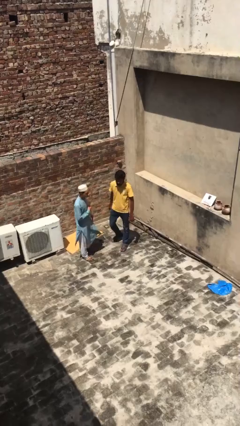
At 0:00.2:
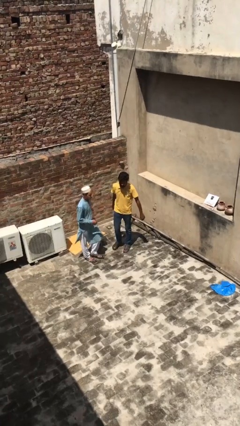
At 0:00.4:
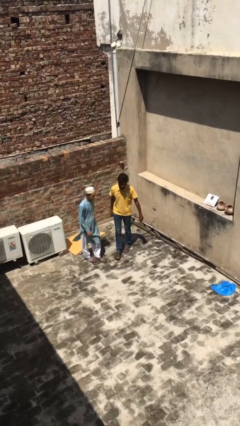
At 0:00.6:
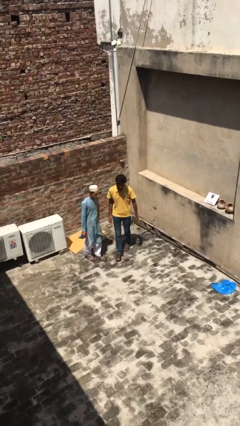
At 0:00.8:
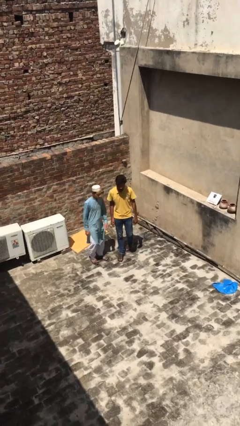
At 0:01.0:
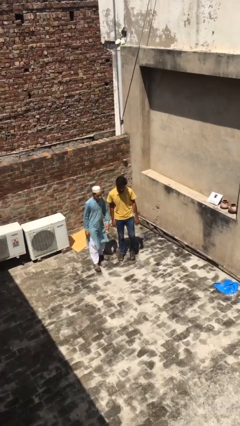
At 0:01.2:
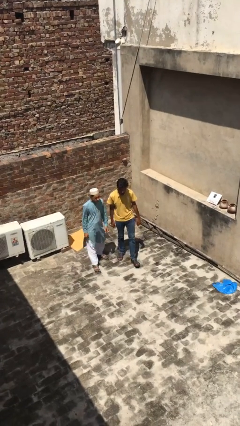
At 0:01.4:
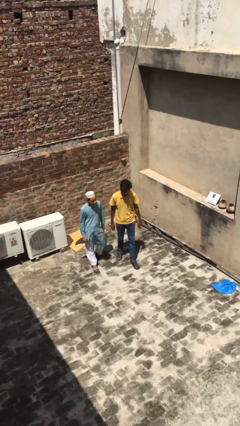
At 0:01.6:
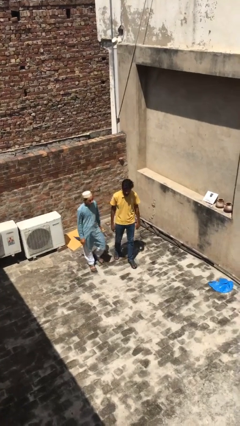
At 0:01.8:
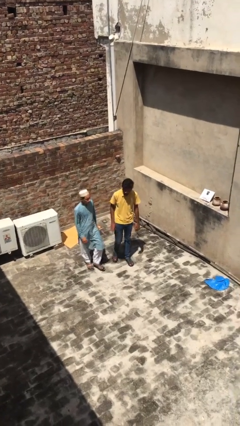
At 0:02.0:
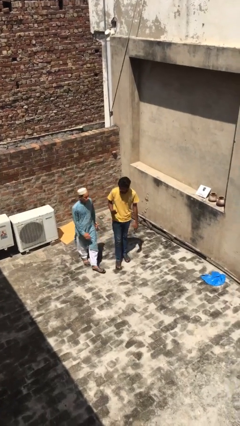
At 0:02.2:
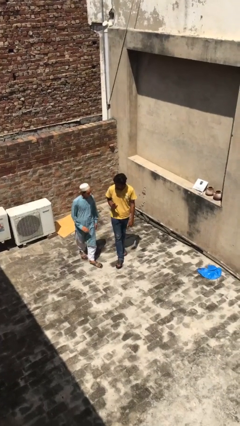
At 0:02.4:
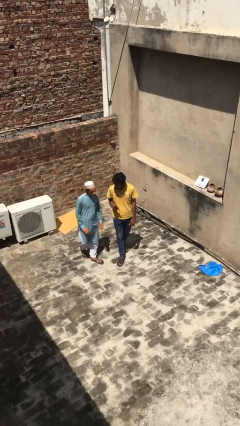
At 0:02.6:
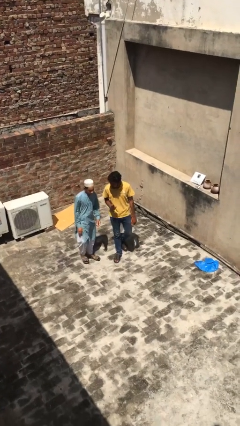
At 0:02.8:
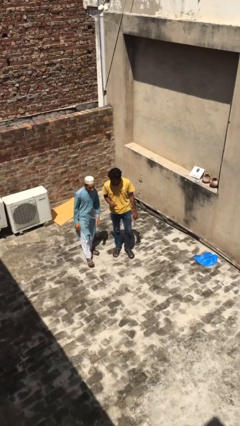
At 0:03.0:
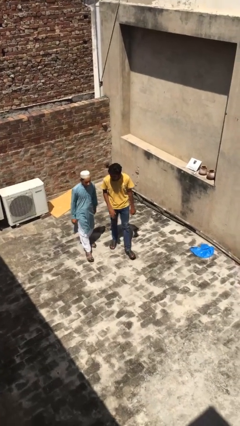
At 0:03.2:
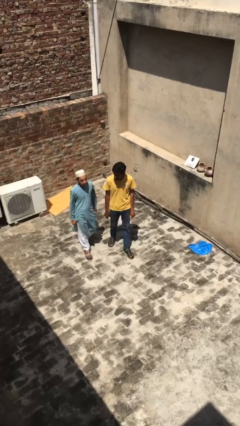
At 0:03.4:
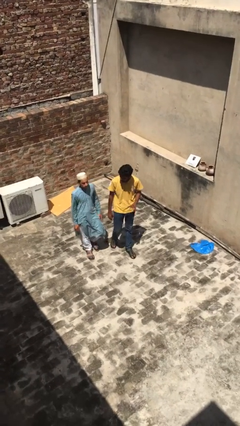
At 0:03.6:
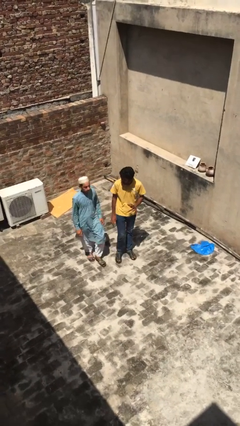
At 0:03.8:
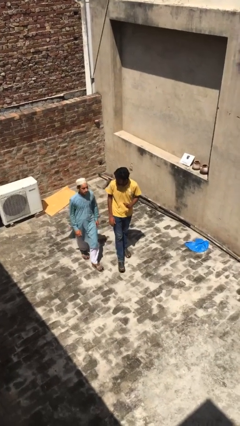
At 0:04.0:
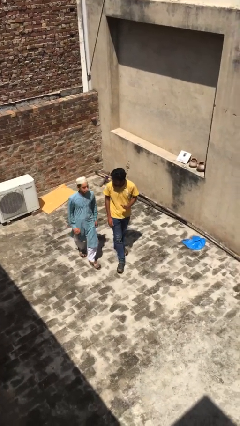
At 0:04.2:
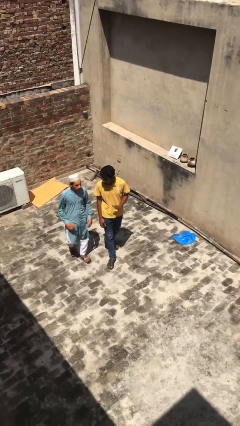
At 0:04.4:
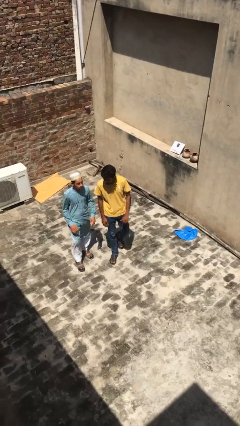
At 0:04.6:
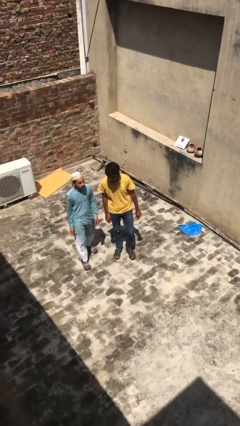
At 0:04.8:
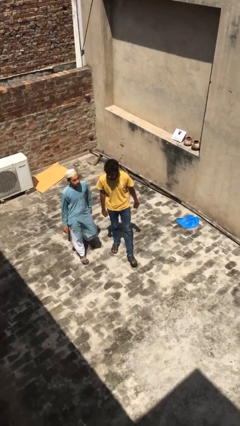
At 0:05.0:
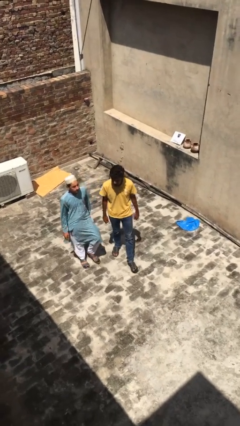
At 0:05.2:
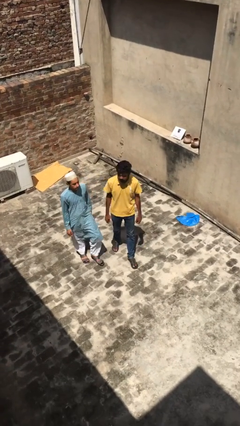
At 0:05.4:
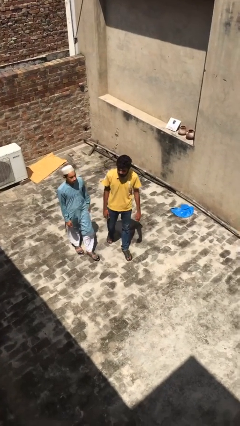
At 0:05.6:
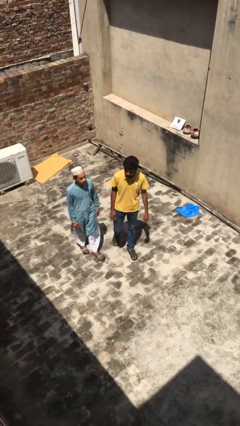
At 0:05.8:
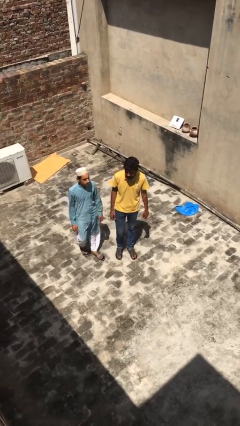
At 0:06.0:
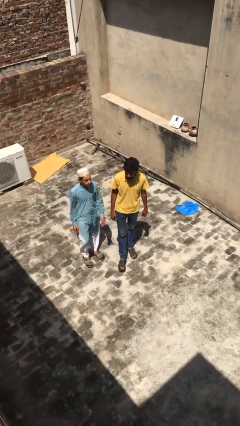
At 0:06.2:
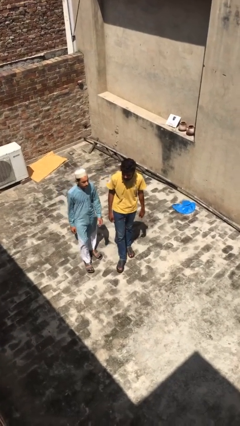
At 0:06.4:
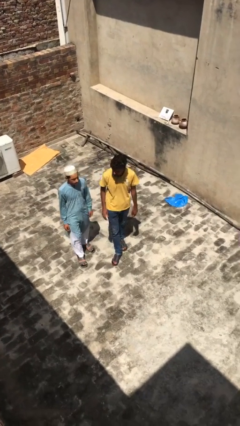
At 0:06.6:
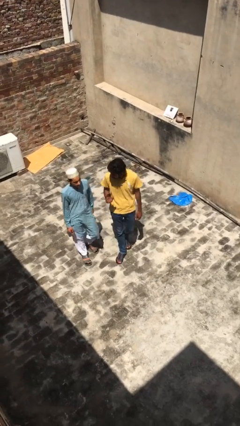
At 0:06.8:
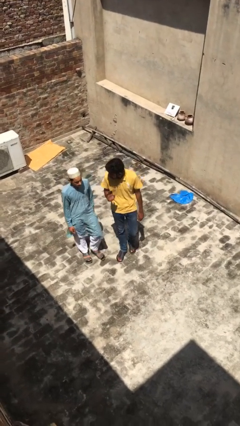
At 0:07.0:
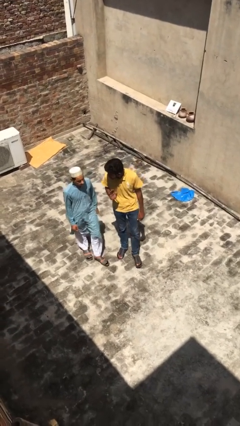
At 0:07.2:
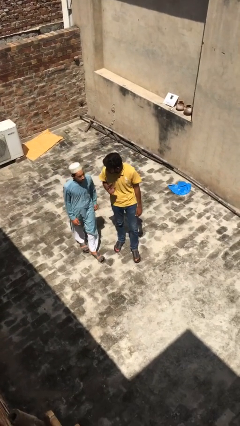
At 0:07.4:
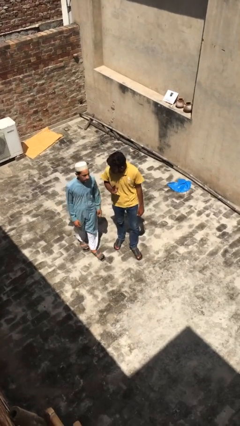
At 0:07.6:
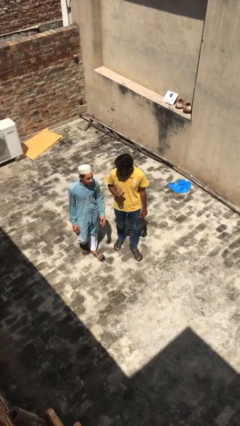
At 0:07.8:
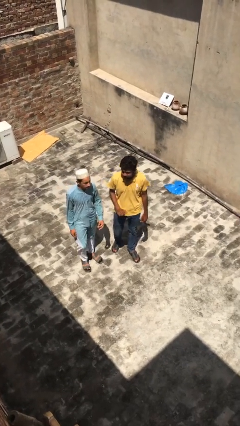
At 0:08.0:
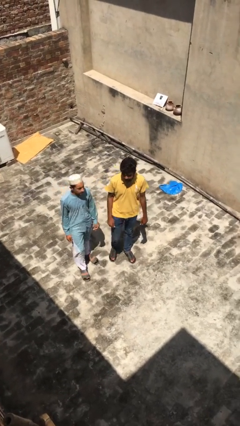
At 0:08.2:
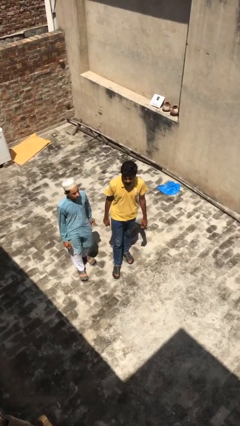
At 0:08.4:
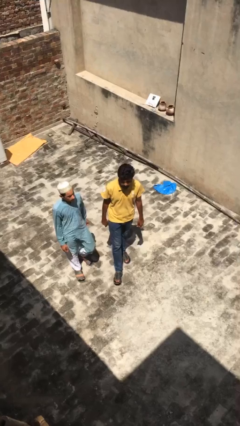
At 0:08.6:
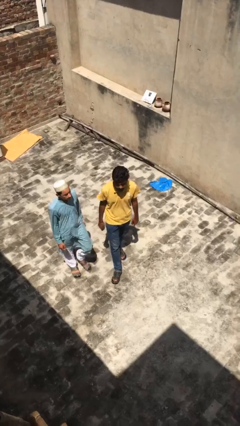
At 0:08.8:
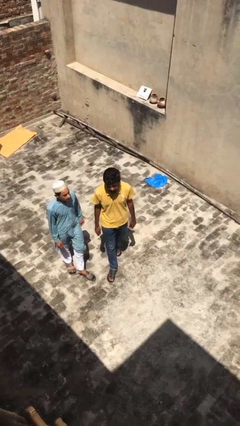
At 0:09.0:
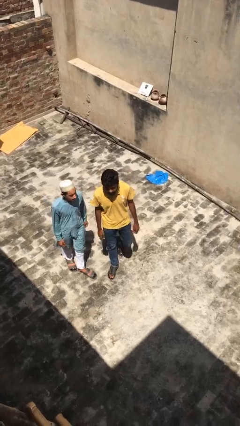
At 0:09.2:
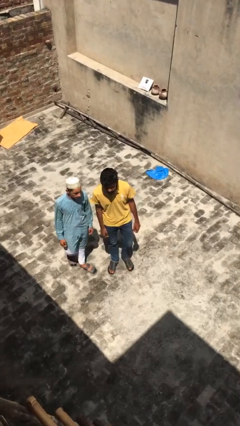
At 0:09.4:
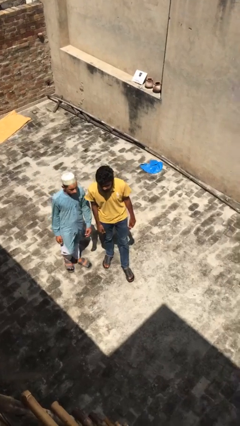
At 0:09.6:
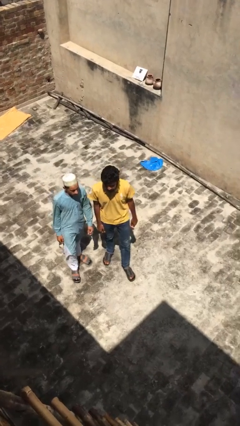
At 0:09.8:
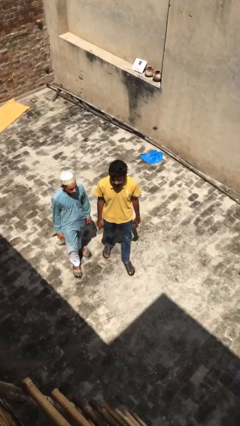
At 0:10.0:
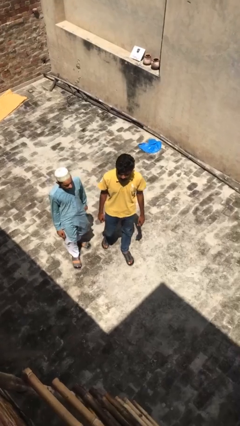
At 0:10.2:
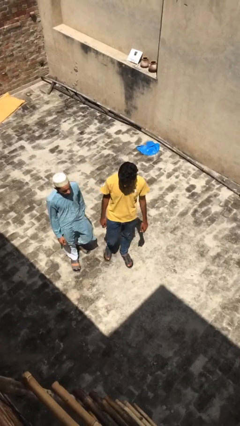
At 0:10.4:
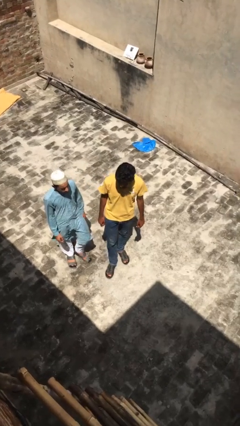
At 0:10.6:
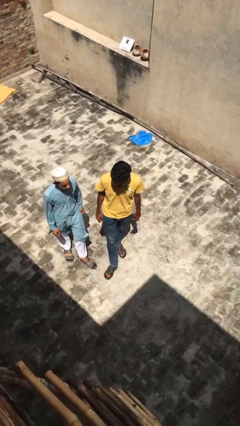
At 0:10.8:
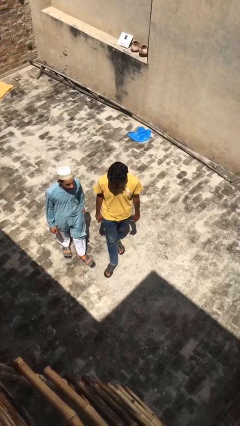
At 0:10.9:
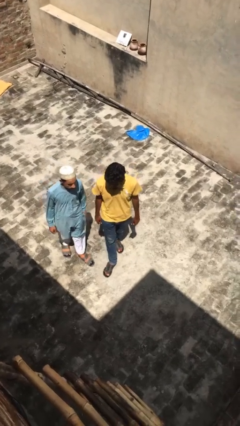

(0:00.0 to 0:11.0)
person talks to person

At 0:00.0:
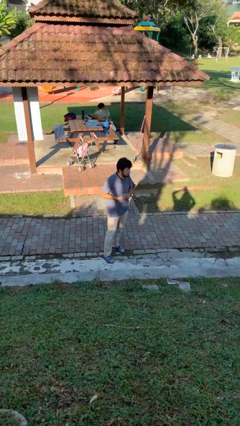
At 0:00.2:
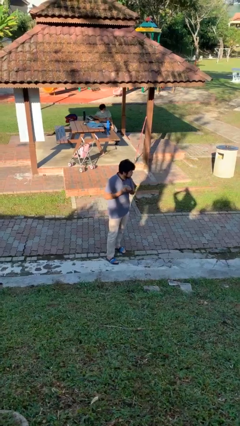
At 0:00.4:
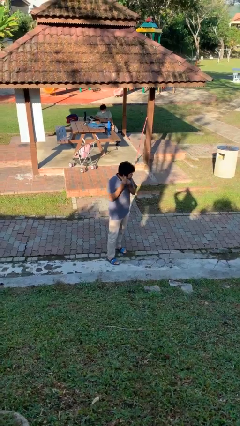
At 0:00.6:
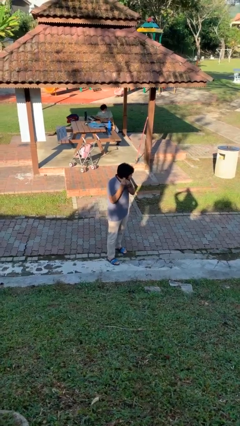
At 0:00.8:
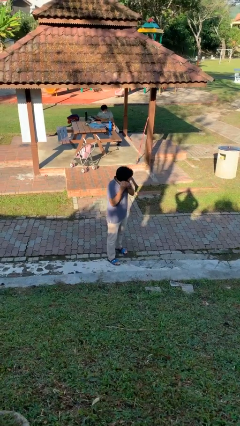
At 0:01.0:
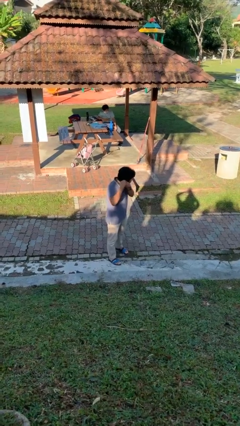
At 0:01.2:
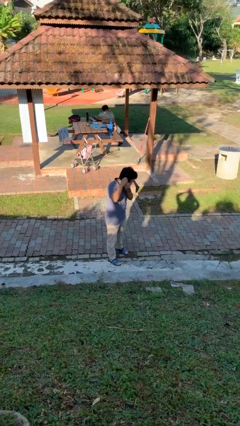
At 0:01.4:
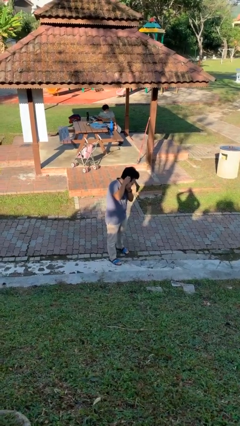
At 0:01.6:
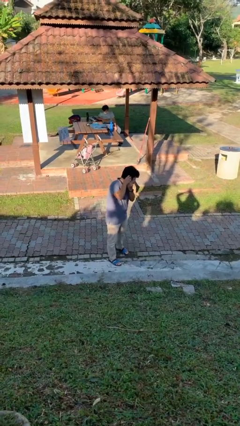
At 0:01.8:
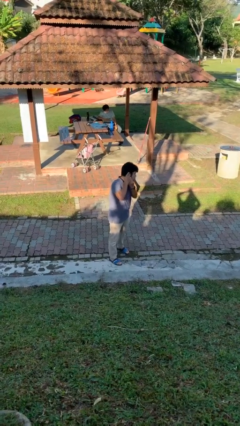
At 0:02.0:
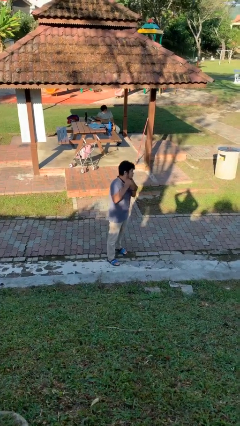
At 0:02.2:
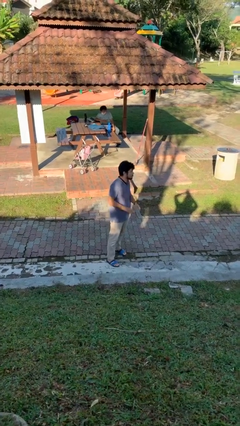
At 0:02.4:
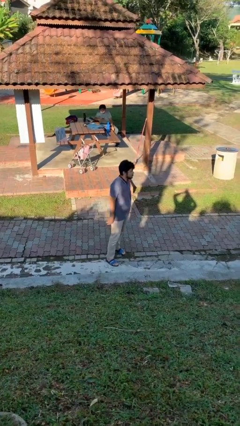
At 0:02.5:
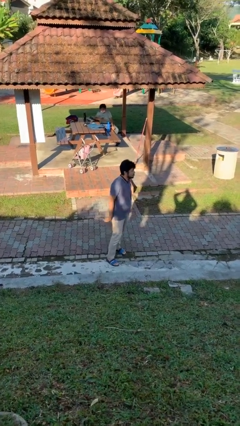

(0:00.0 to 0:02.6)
person puts on earrings

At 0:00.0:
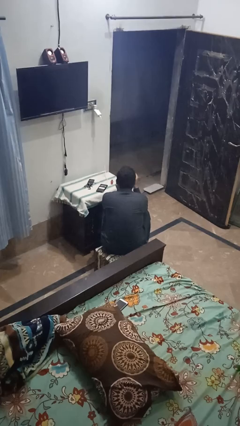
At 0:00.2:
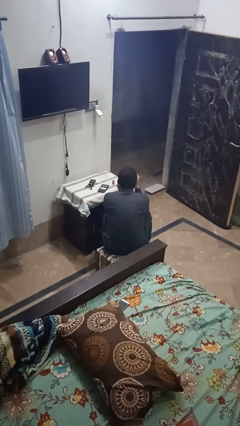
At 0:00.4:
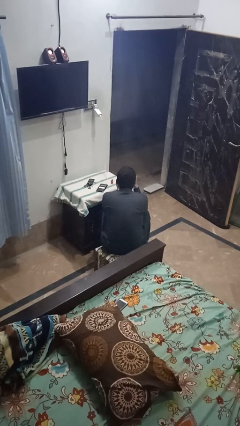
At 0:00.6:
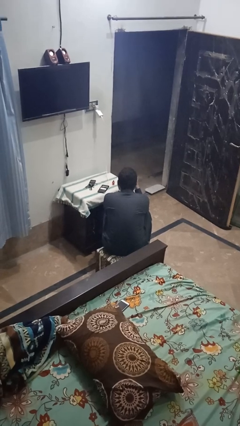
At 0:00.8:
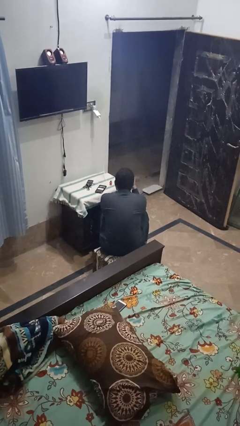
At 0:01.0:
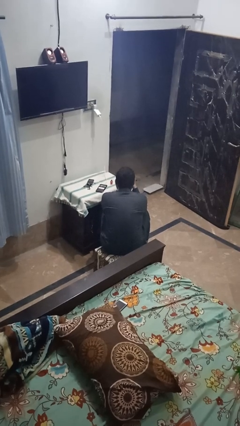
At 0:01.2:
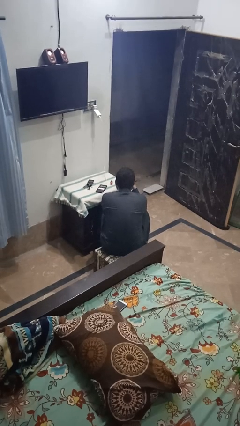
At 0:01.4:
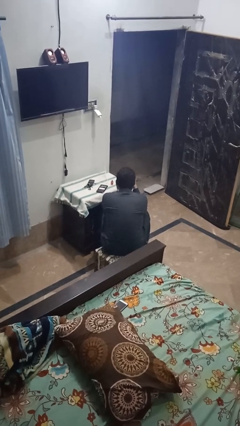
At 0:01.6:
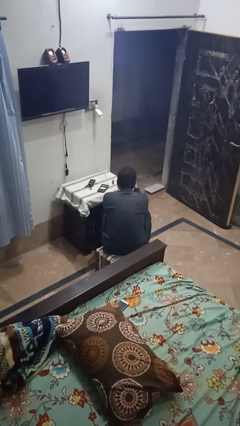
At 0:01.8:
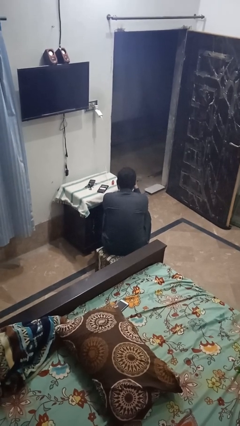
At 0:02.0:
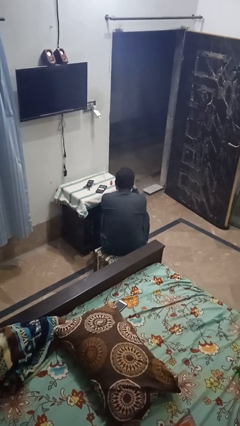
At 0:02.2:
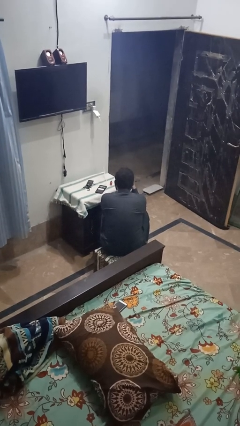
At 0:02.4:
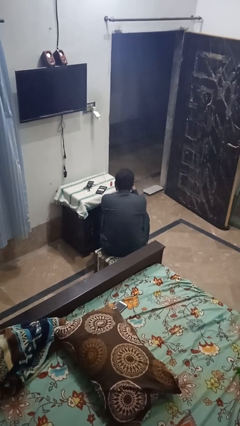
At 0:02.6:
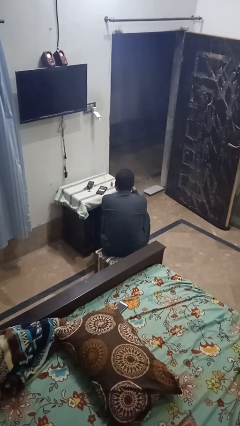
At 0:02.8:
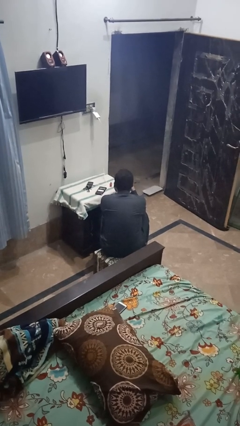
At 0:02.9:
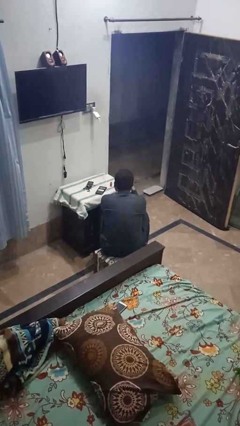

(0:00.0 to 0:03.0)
person paints fingernails

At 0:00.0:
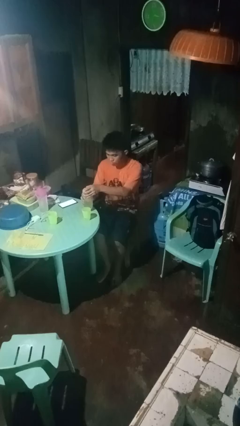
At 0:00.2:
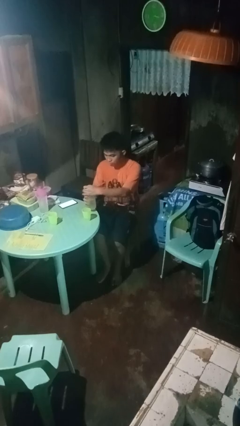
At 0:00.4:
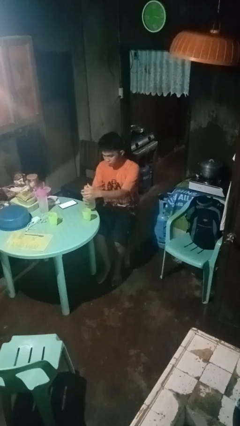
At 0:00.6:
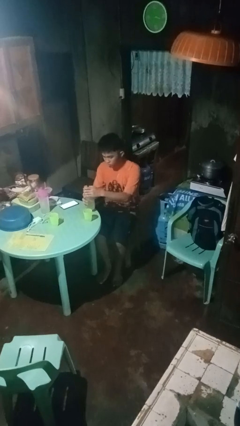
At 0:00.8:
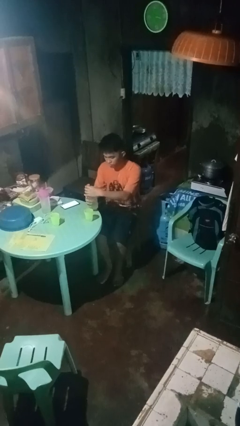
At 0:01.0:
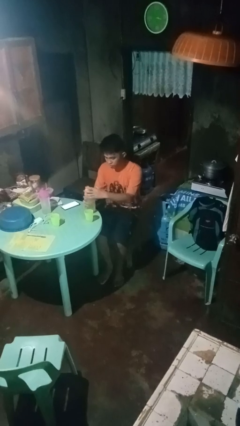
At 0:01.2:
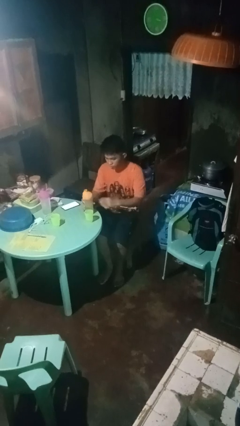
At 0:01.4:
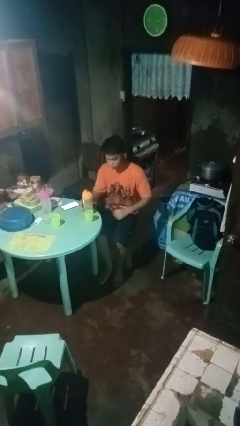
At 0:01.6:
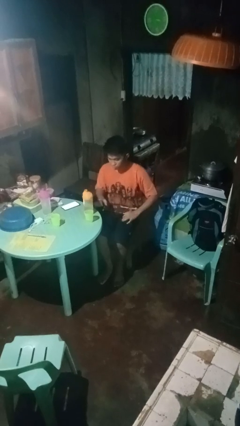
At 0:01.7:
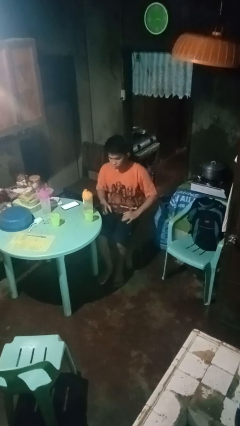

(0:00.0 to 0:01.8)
person screws lid to bottle
